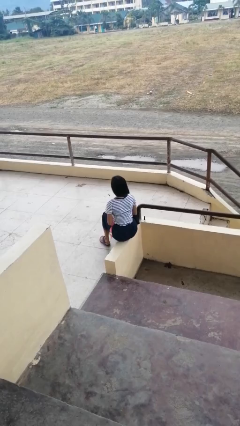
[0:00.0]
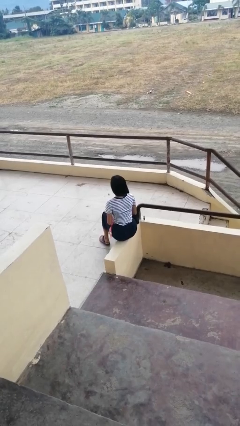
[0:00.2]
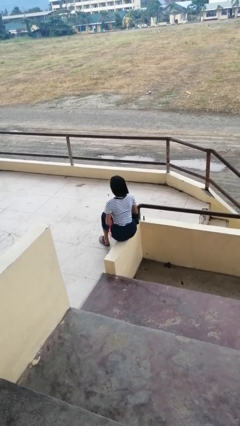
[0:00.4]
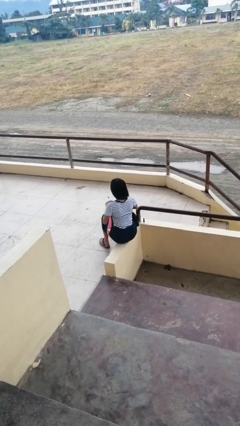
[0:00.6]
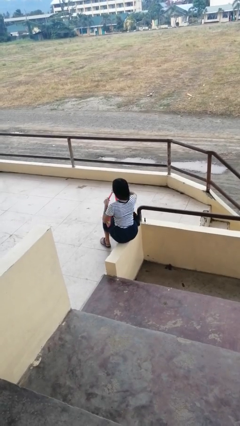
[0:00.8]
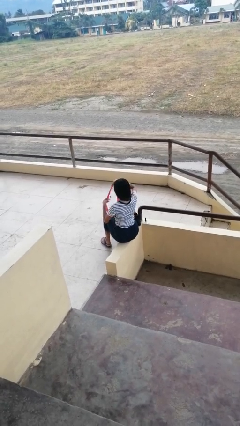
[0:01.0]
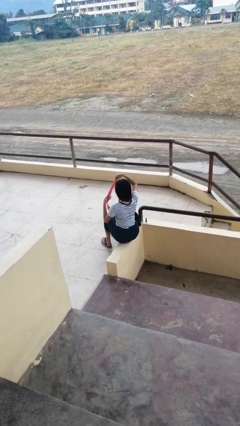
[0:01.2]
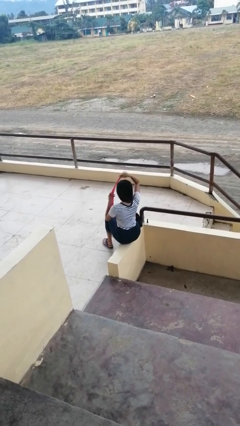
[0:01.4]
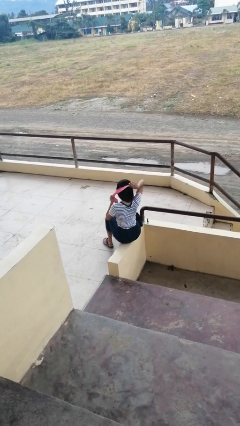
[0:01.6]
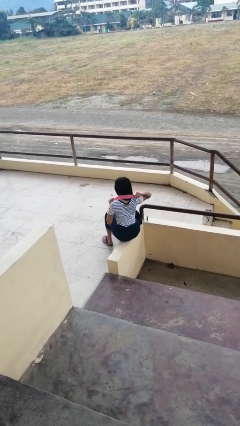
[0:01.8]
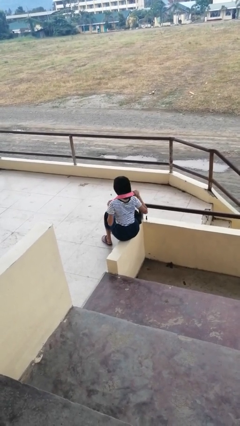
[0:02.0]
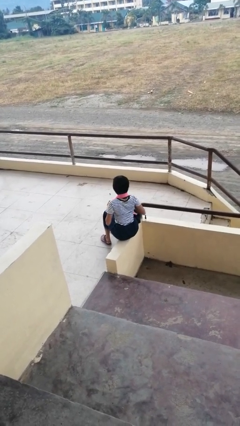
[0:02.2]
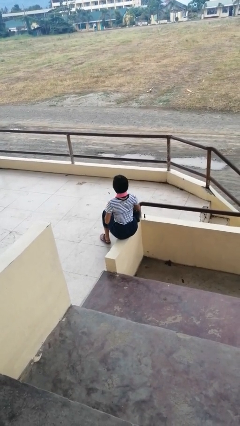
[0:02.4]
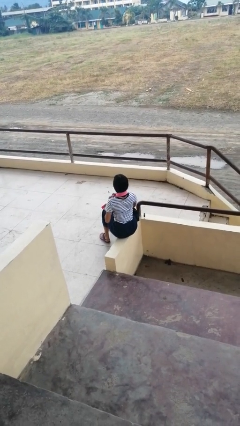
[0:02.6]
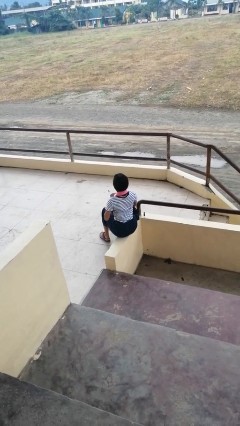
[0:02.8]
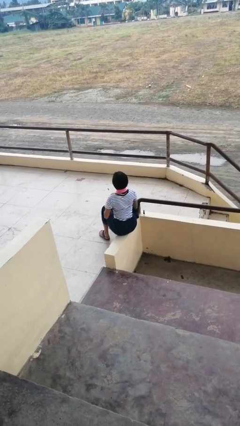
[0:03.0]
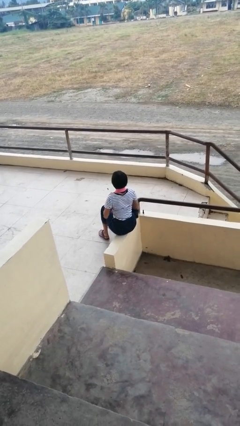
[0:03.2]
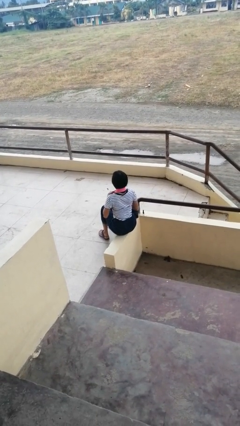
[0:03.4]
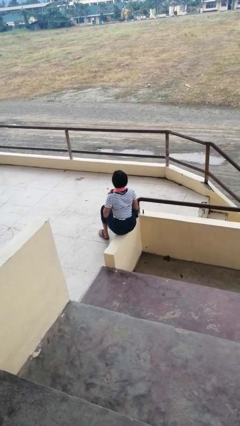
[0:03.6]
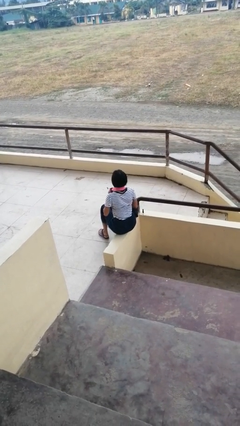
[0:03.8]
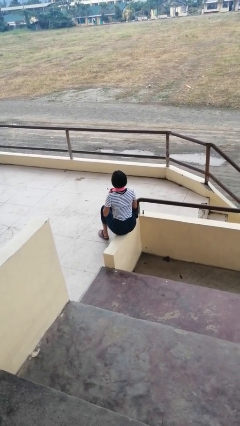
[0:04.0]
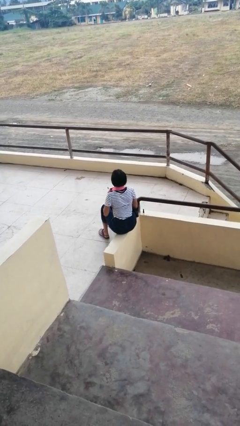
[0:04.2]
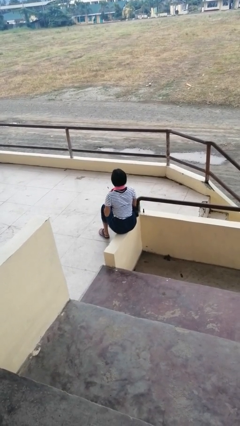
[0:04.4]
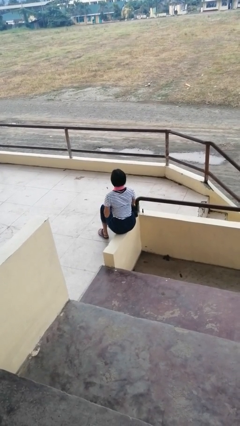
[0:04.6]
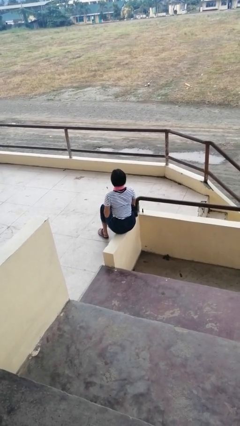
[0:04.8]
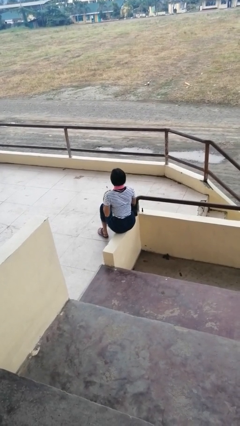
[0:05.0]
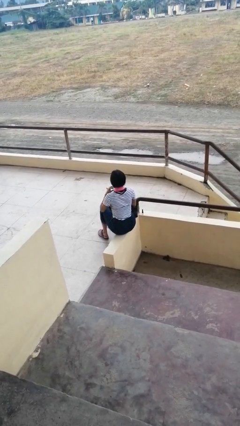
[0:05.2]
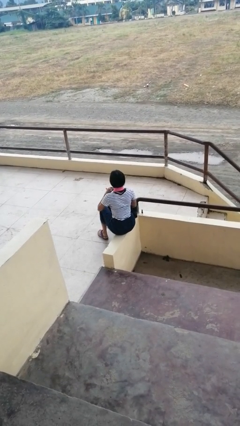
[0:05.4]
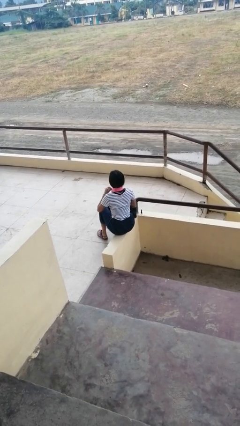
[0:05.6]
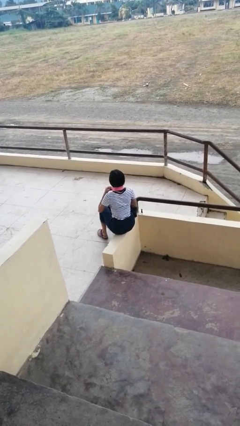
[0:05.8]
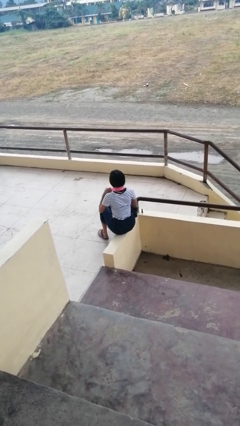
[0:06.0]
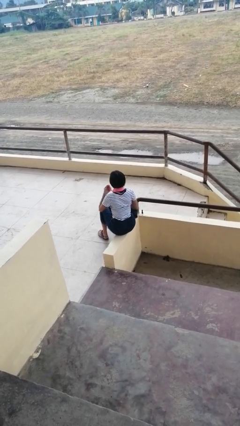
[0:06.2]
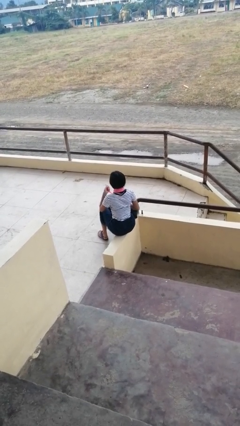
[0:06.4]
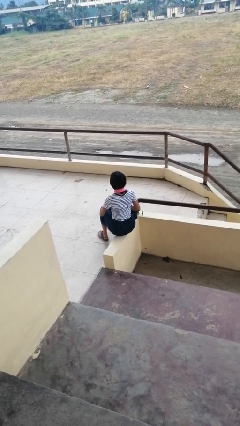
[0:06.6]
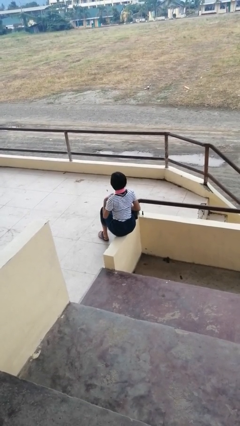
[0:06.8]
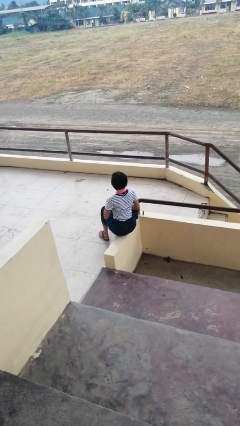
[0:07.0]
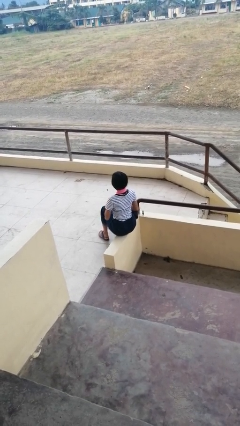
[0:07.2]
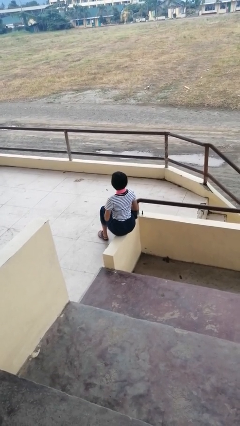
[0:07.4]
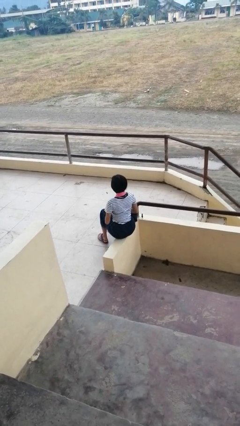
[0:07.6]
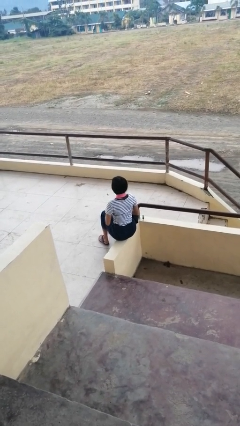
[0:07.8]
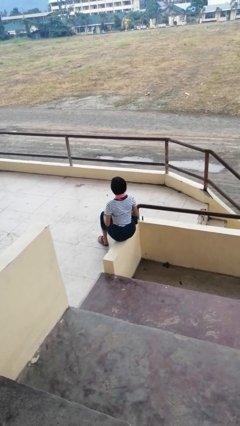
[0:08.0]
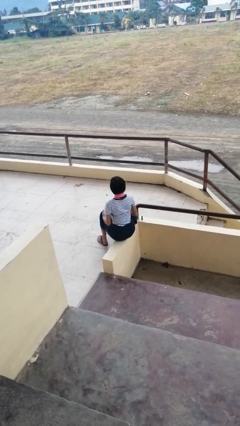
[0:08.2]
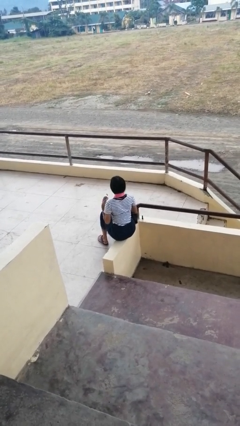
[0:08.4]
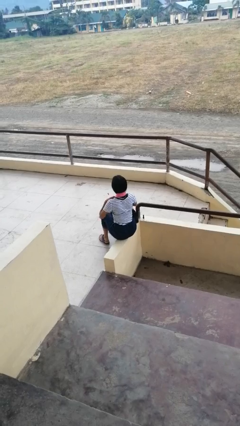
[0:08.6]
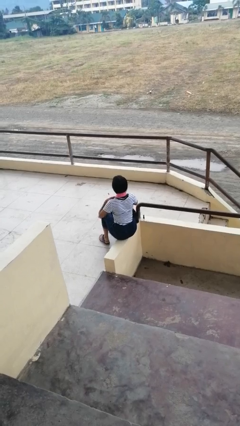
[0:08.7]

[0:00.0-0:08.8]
person puts on necktie

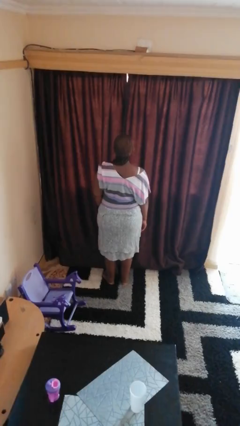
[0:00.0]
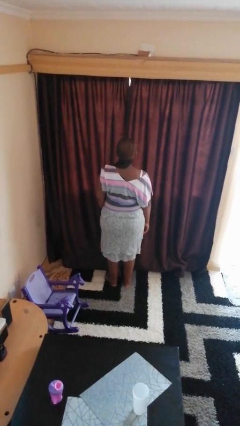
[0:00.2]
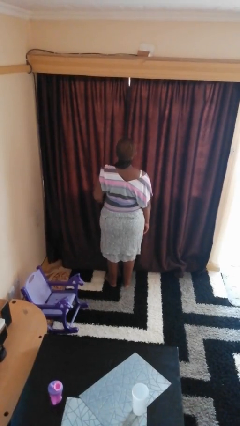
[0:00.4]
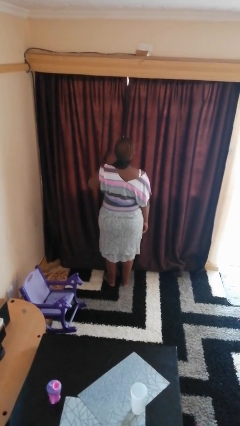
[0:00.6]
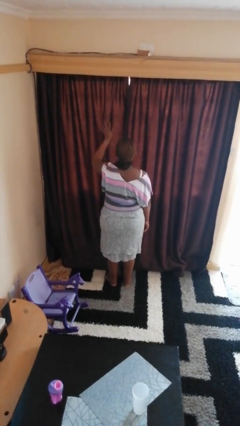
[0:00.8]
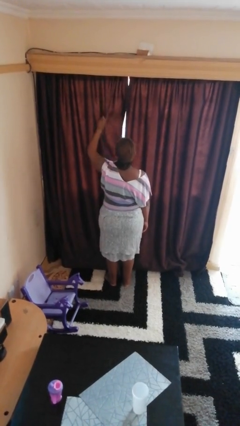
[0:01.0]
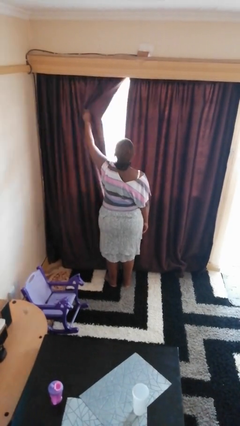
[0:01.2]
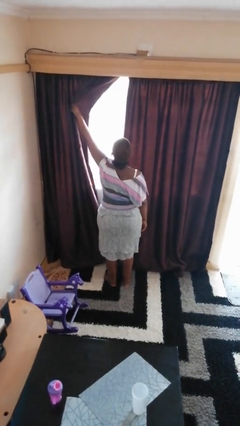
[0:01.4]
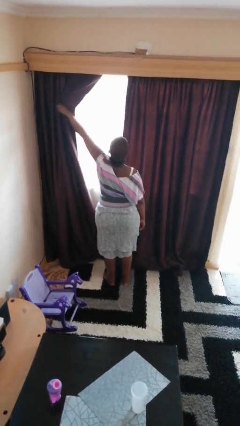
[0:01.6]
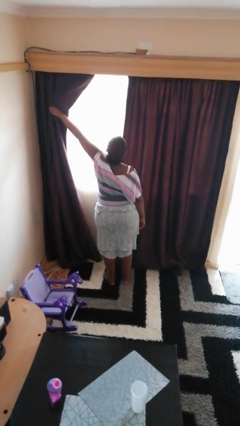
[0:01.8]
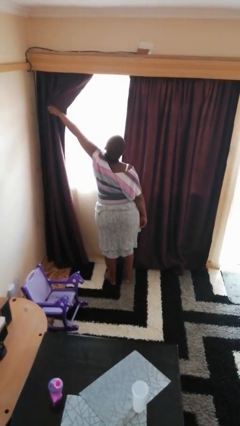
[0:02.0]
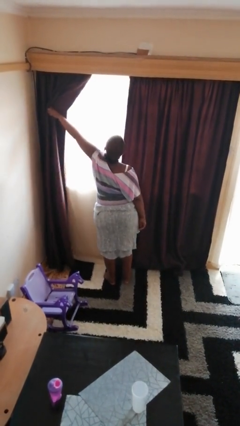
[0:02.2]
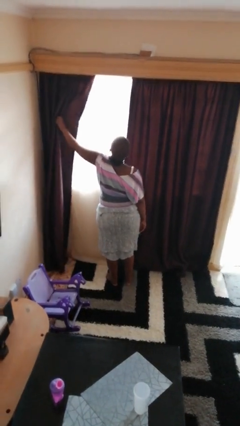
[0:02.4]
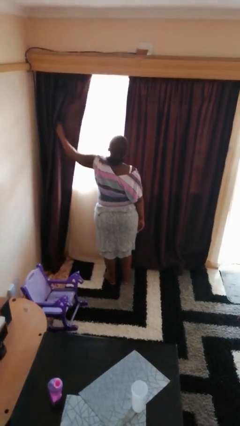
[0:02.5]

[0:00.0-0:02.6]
person opens curtains

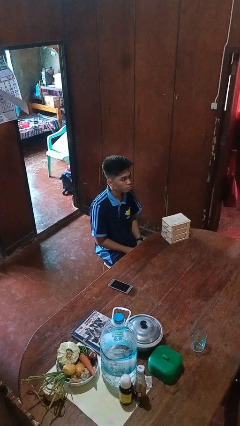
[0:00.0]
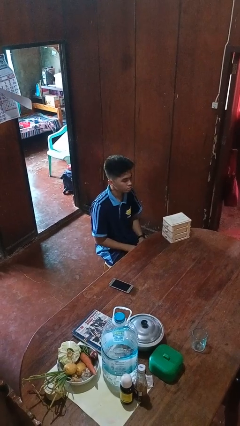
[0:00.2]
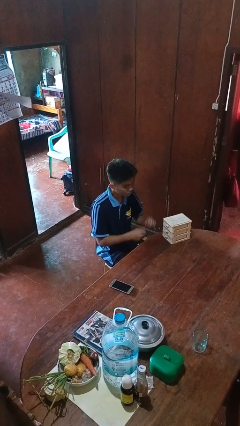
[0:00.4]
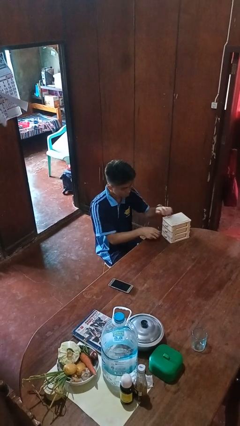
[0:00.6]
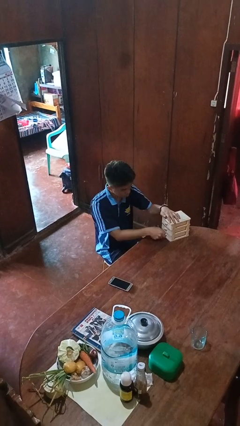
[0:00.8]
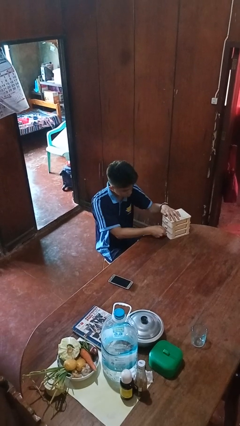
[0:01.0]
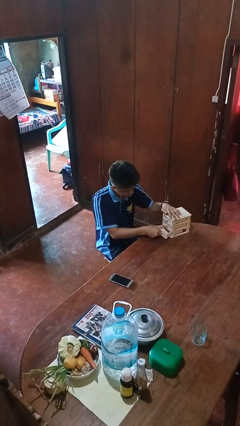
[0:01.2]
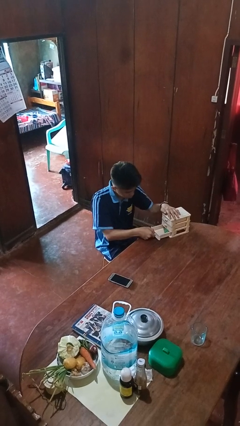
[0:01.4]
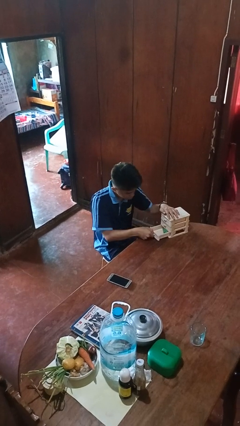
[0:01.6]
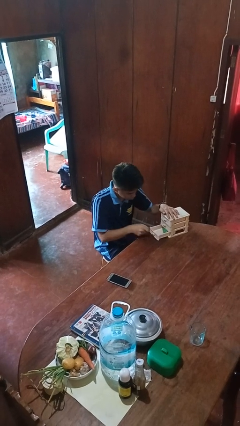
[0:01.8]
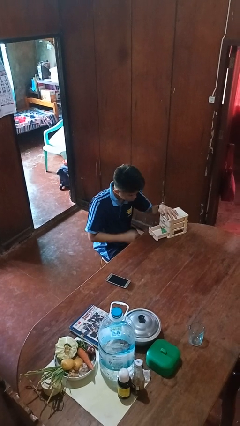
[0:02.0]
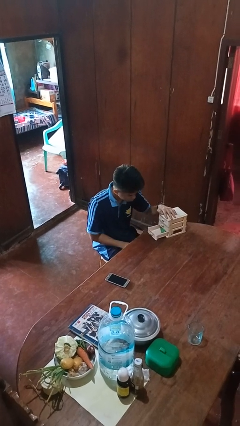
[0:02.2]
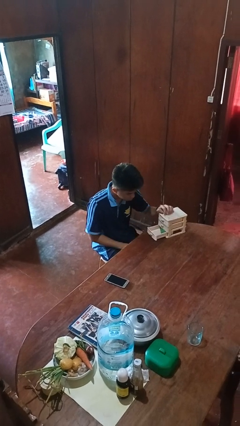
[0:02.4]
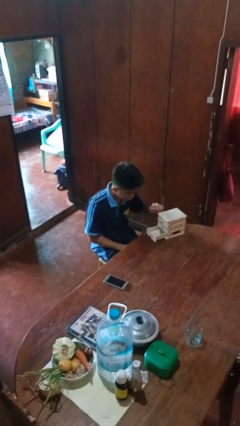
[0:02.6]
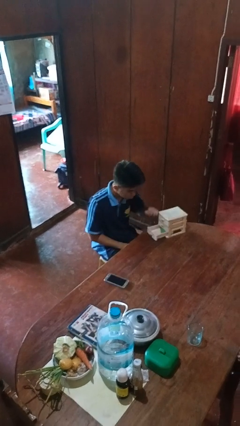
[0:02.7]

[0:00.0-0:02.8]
person opens jewelry box

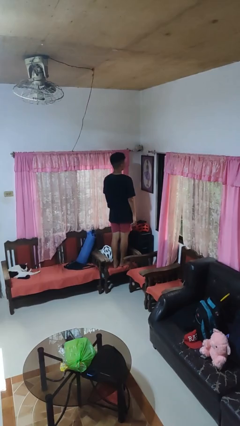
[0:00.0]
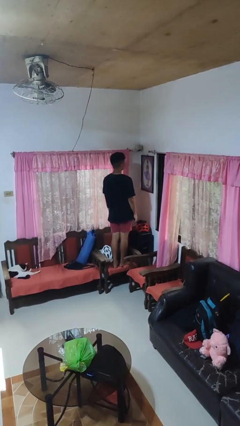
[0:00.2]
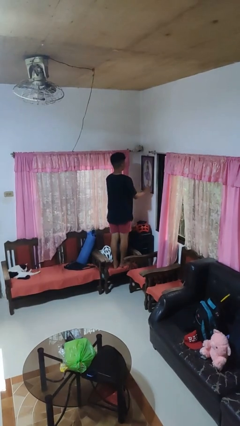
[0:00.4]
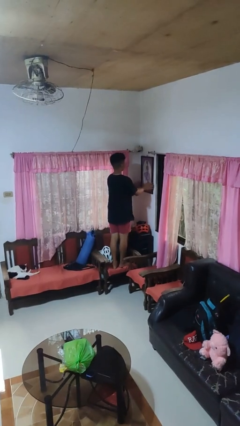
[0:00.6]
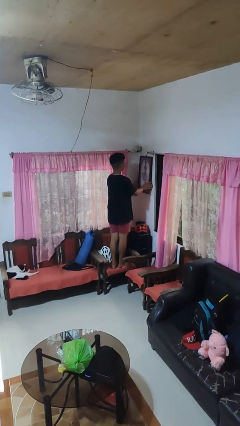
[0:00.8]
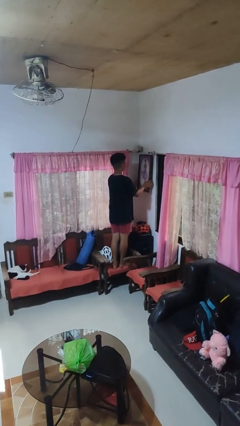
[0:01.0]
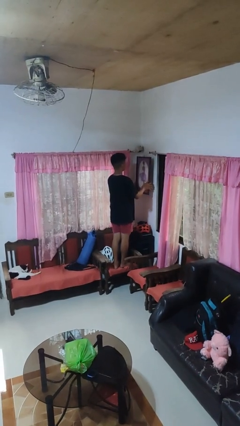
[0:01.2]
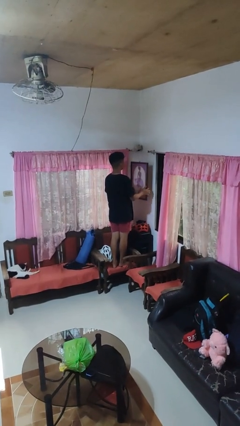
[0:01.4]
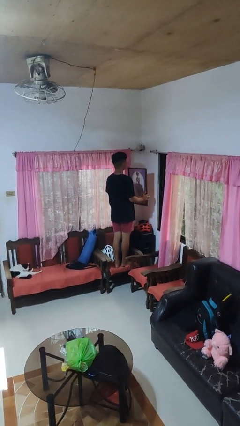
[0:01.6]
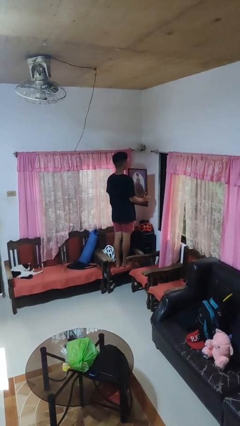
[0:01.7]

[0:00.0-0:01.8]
person takes down picture frame

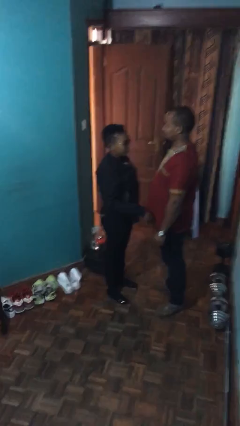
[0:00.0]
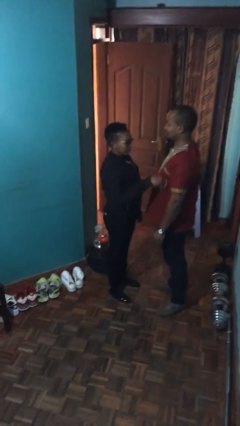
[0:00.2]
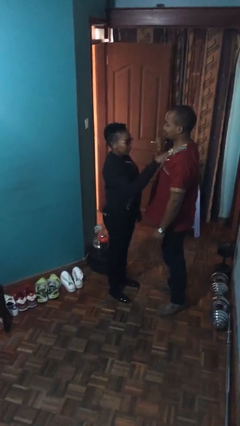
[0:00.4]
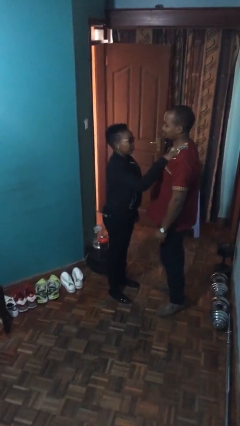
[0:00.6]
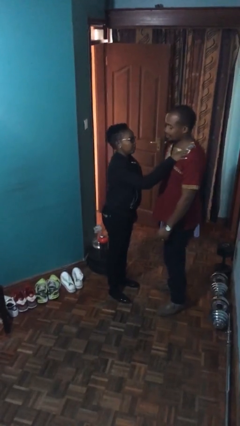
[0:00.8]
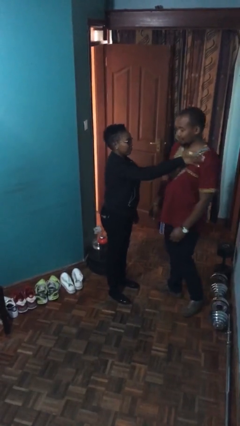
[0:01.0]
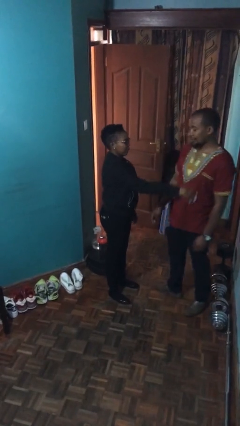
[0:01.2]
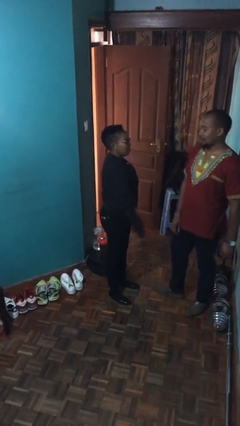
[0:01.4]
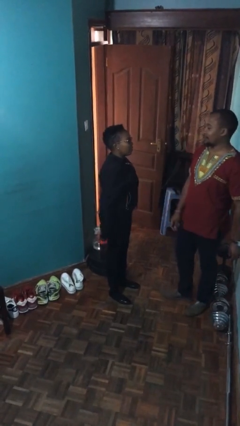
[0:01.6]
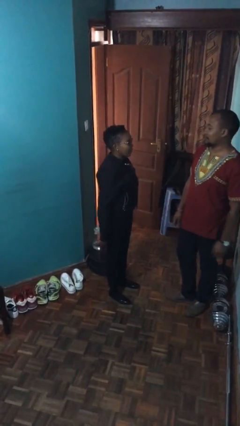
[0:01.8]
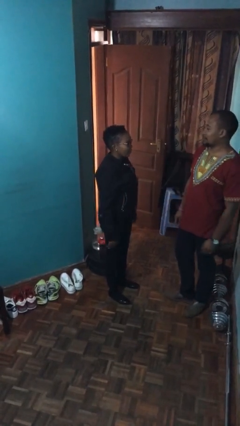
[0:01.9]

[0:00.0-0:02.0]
person shoves person
